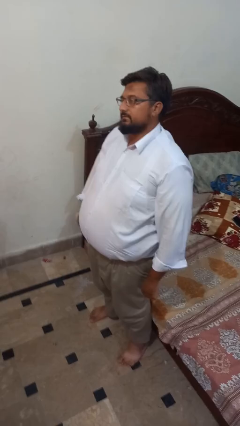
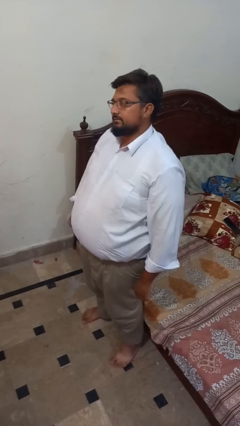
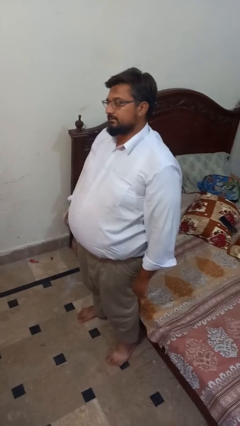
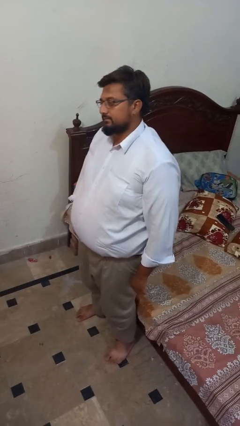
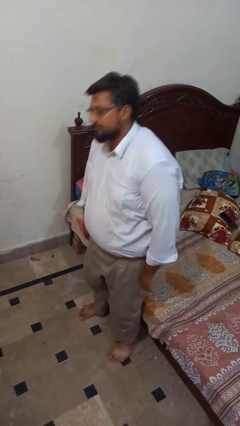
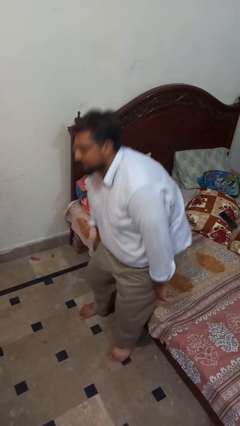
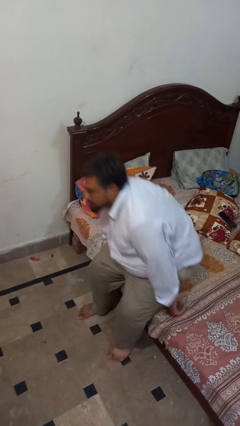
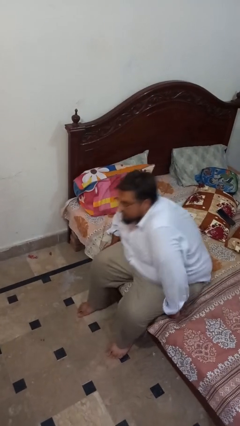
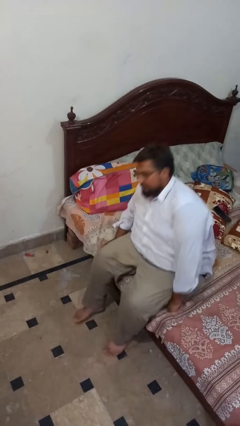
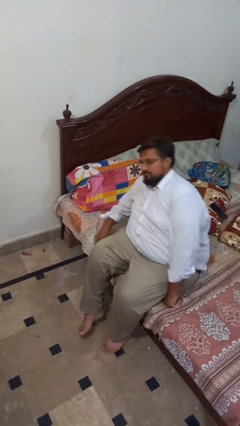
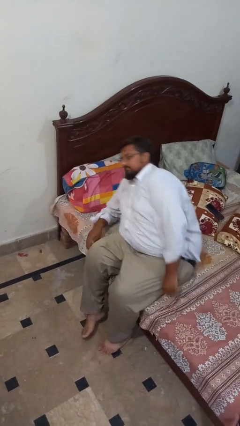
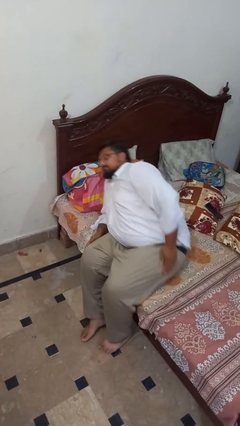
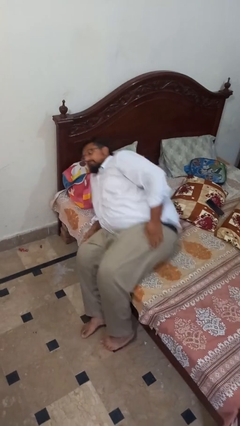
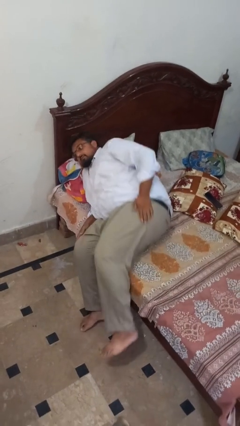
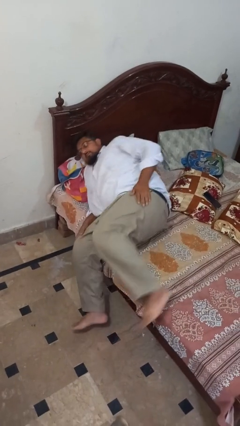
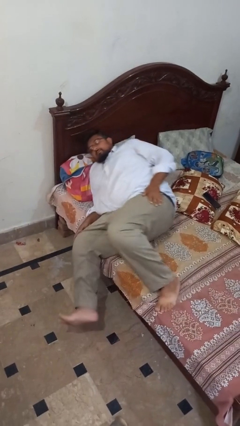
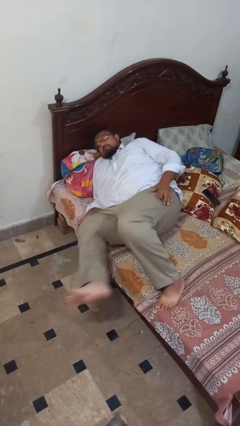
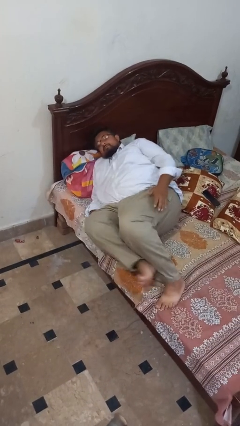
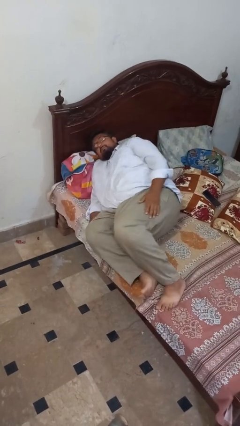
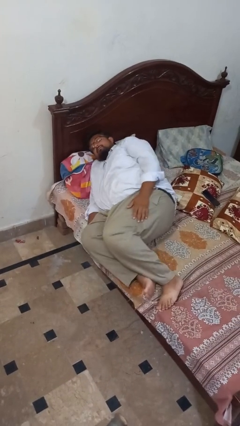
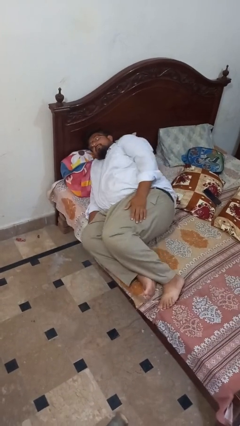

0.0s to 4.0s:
person lies down on bed

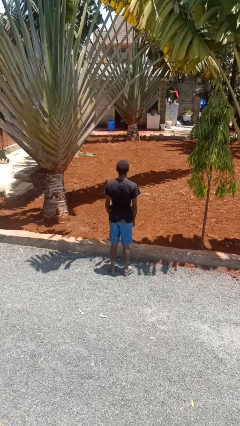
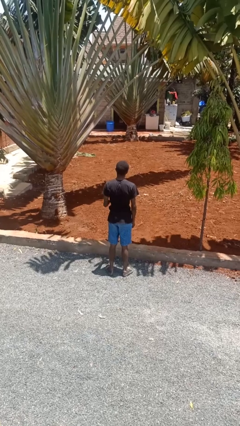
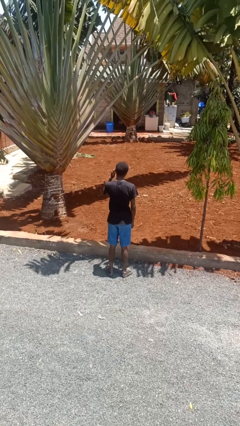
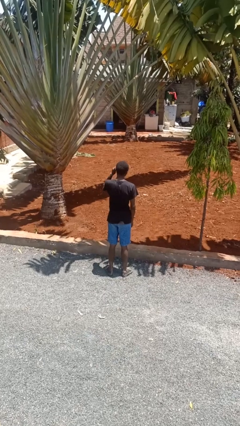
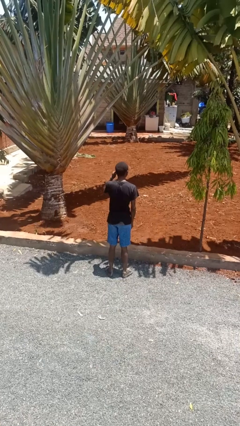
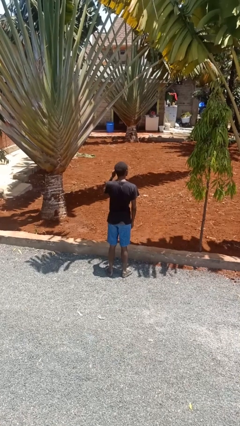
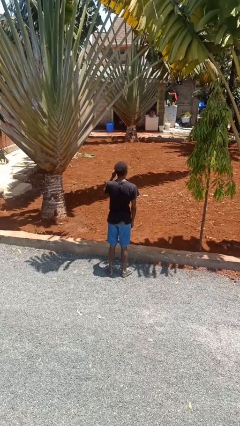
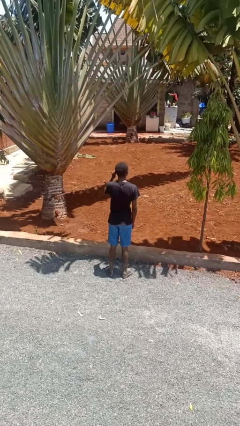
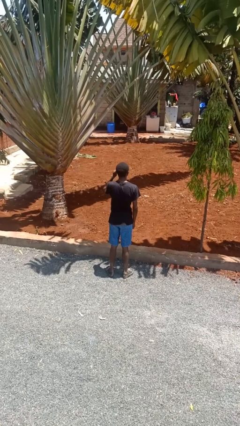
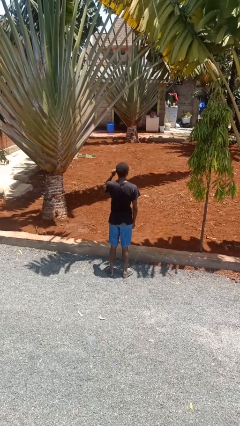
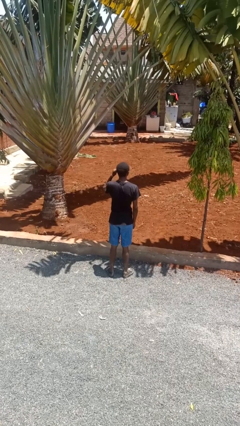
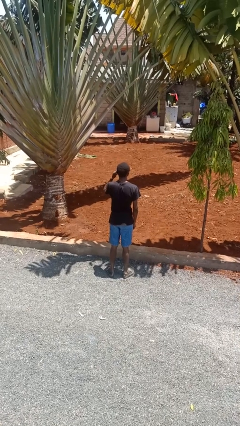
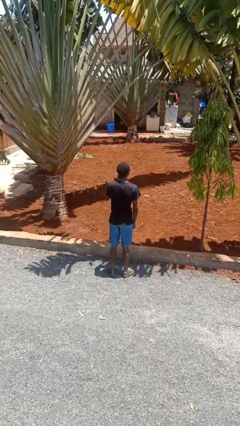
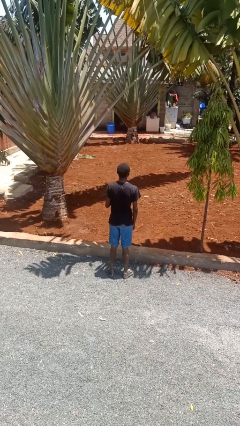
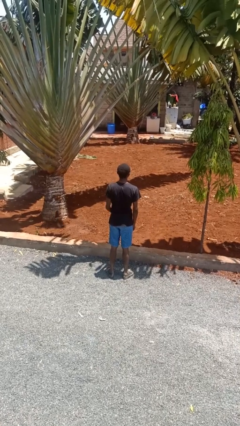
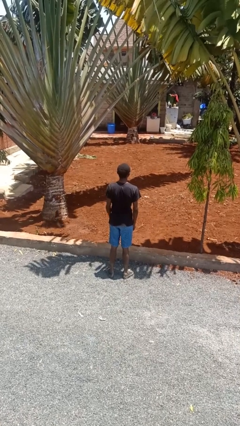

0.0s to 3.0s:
person touches earlobe

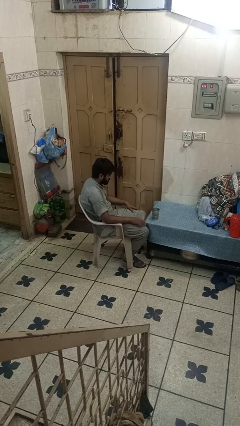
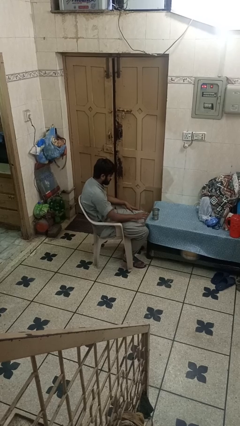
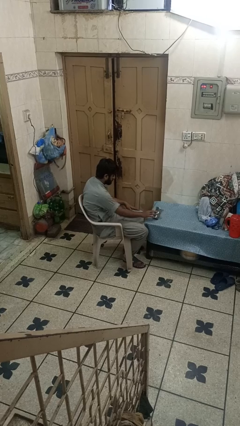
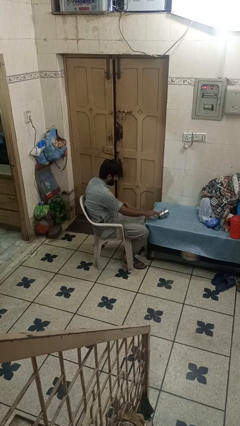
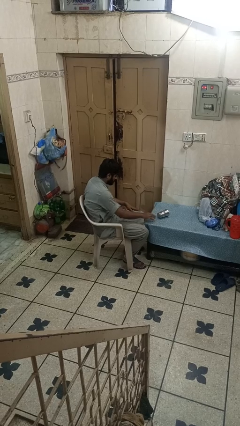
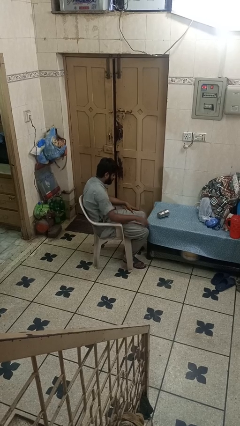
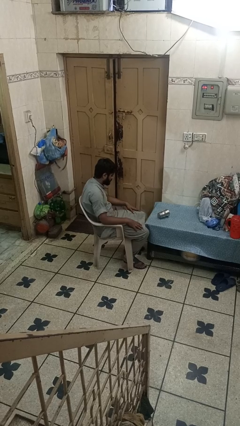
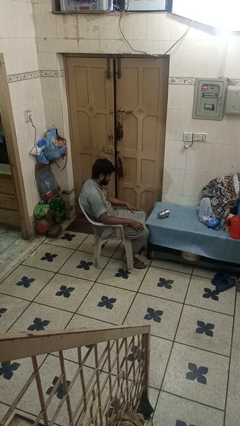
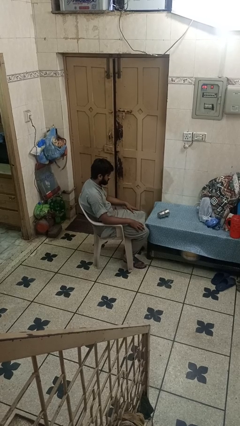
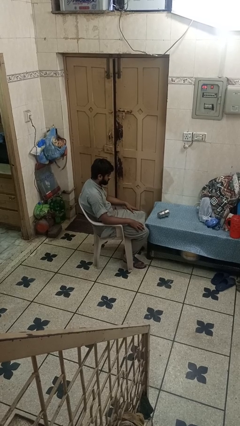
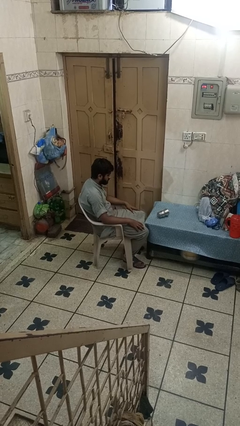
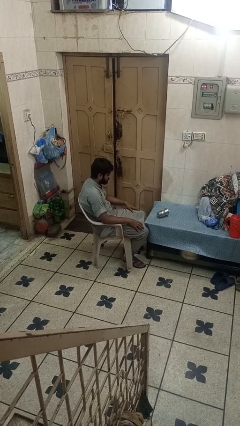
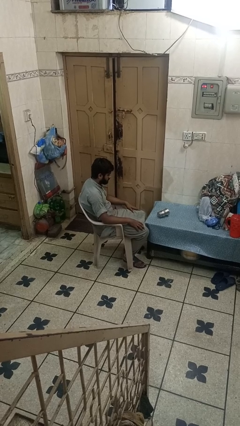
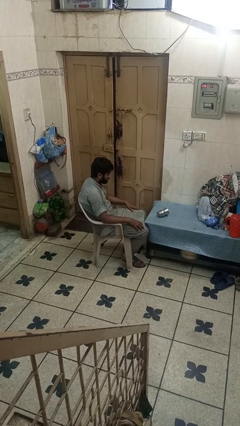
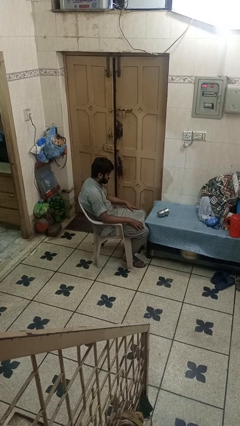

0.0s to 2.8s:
person knocks over glass

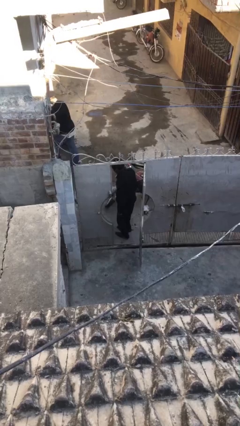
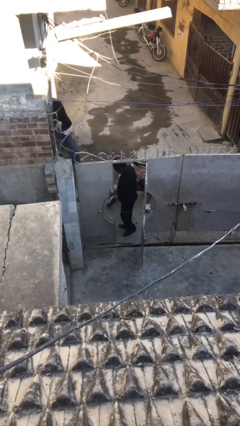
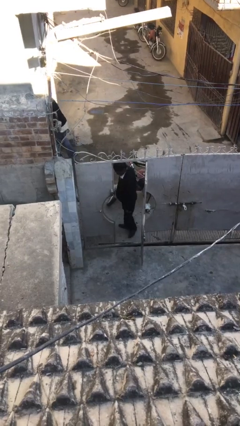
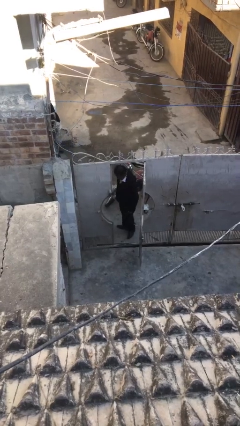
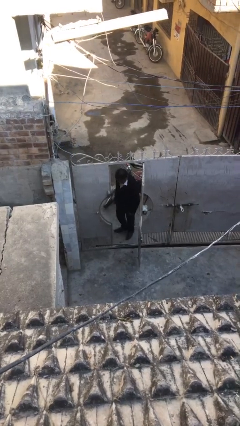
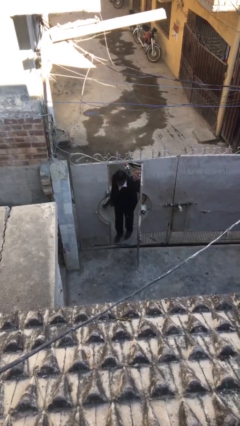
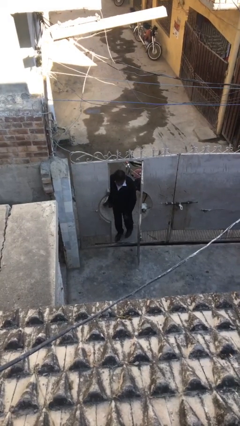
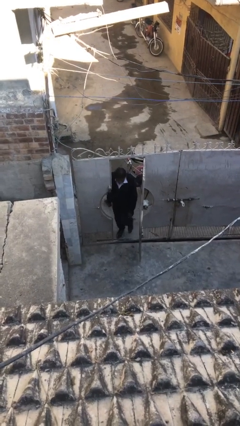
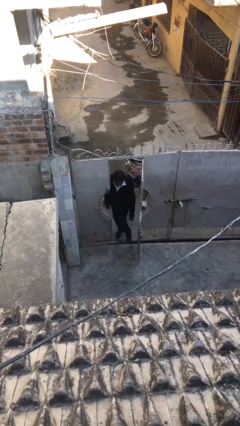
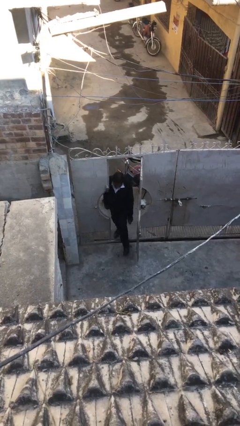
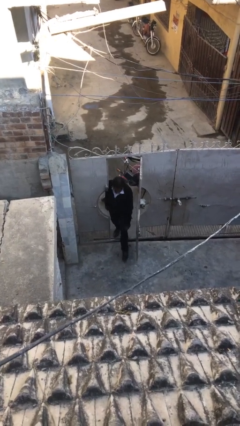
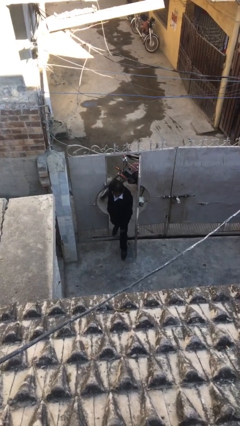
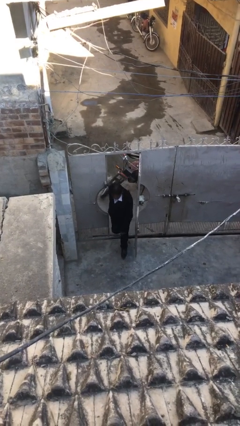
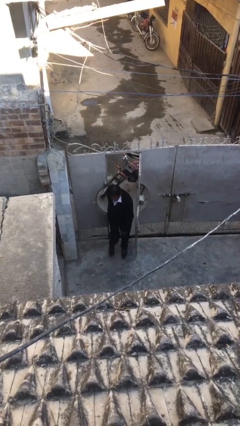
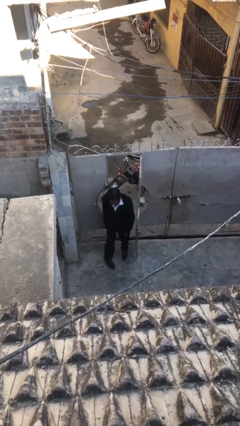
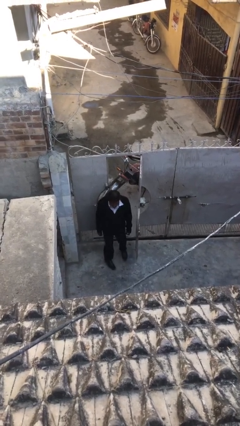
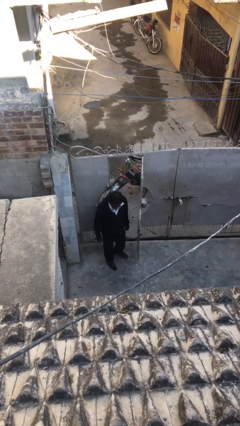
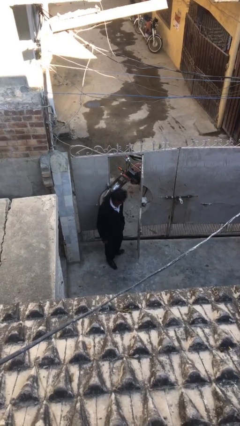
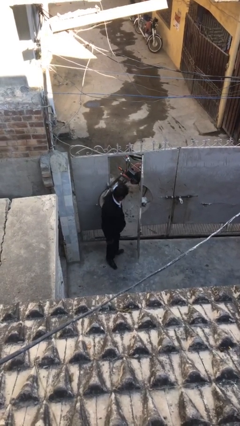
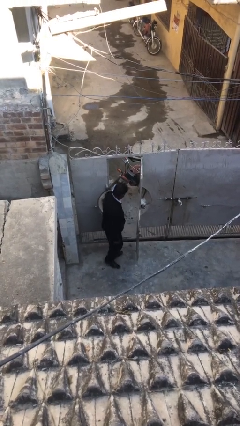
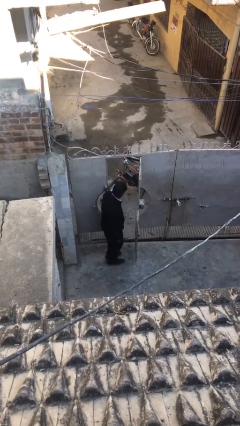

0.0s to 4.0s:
person enters scene through structure

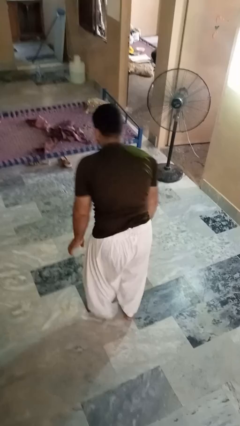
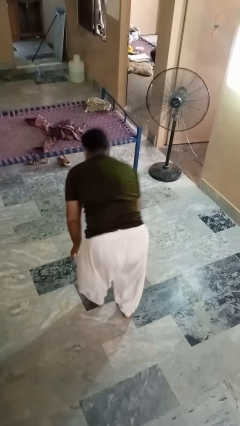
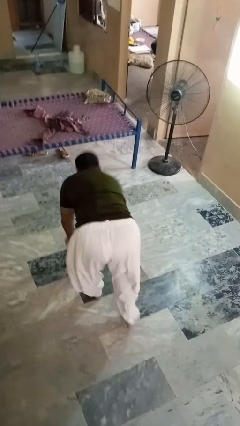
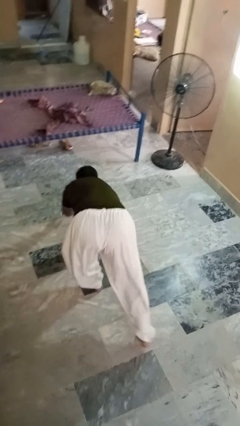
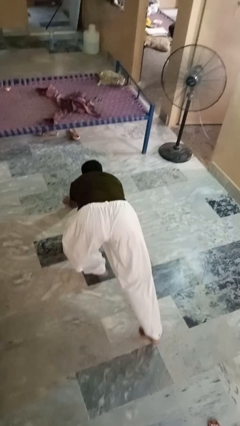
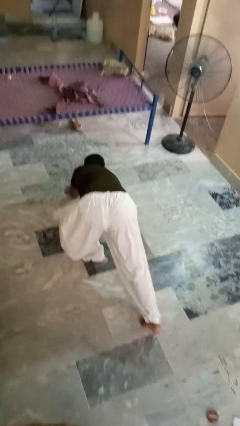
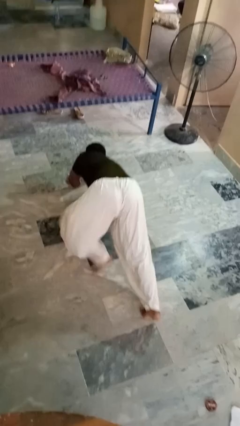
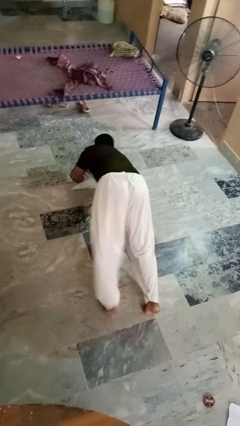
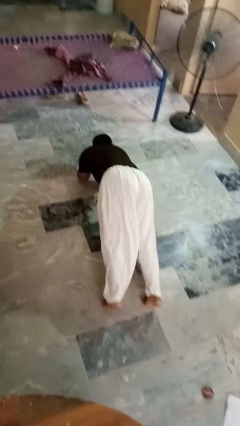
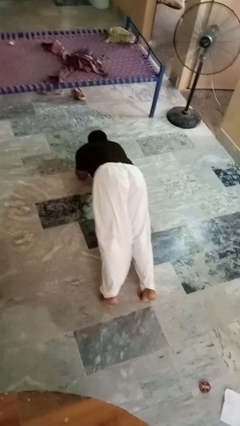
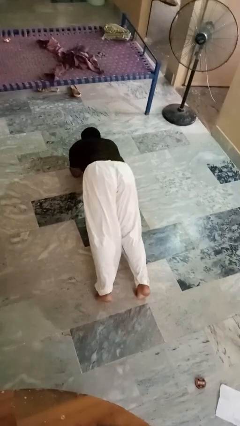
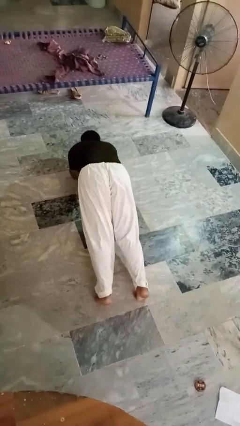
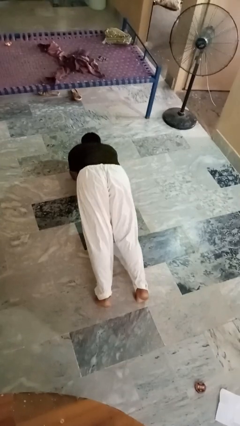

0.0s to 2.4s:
person exercises with plank

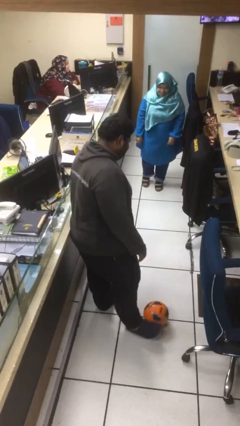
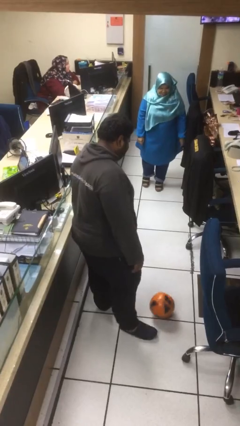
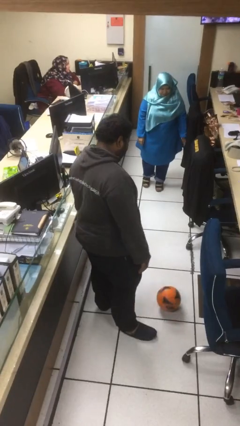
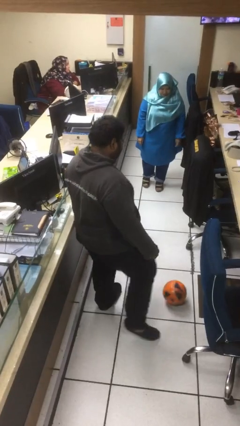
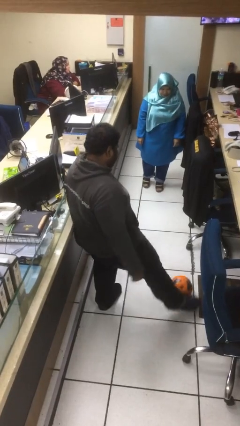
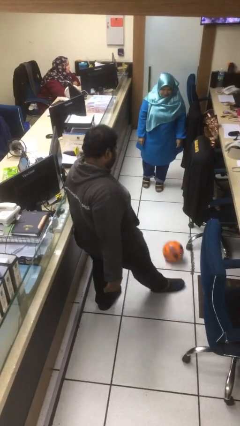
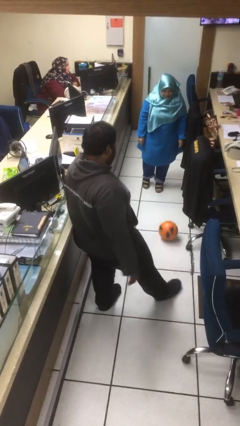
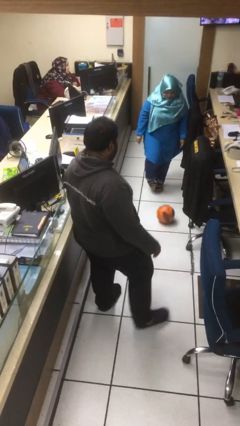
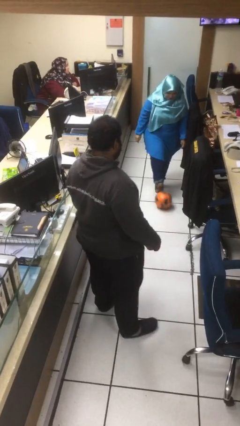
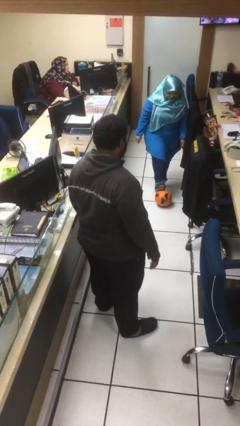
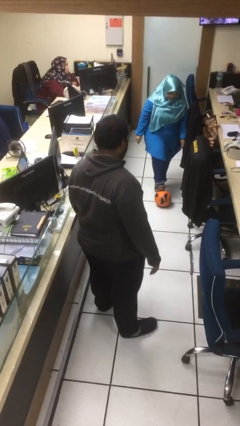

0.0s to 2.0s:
person kicks object to person
